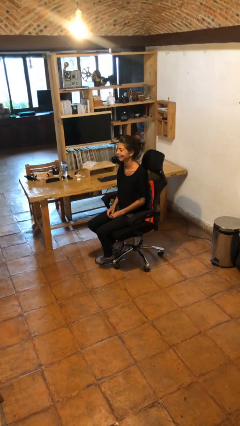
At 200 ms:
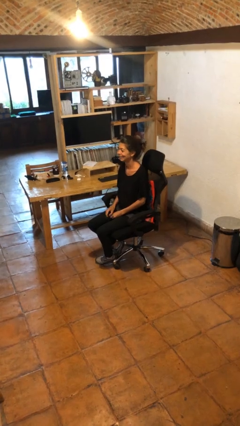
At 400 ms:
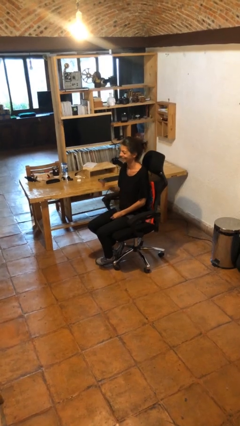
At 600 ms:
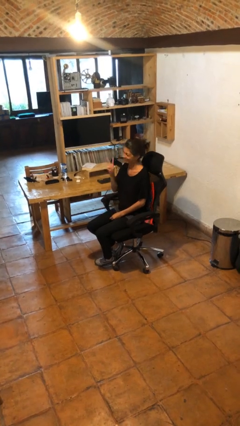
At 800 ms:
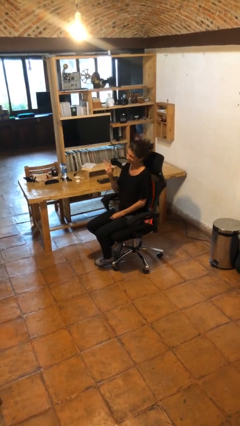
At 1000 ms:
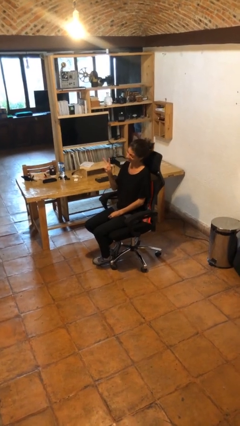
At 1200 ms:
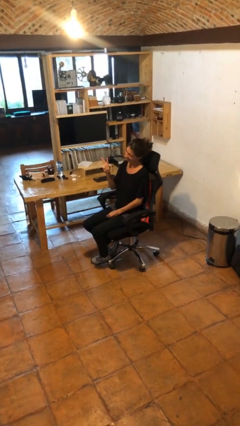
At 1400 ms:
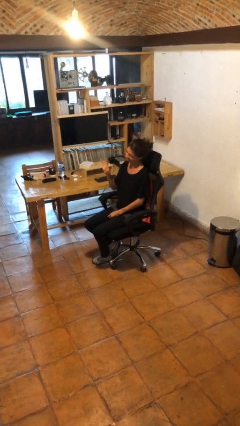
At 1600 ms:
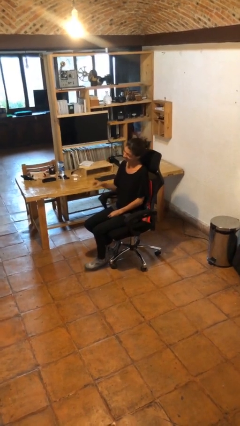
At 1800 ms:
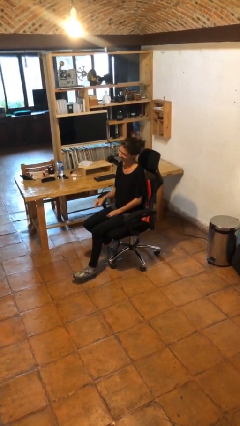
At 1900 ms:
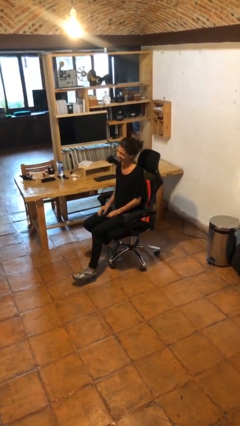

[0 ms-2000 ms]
person gestures peace

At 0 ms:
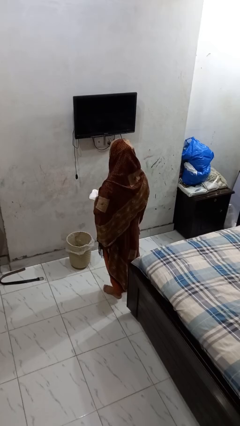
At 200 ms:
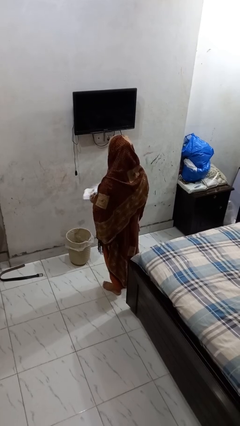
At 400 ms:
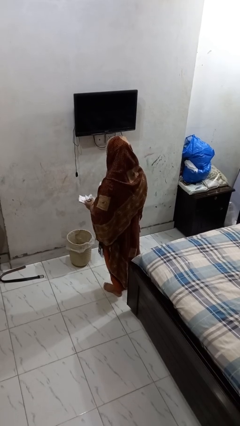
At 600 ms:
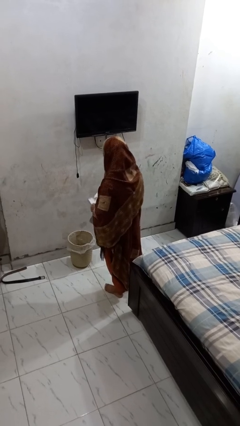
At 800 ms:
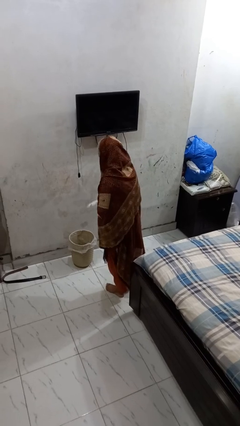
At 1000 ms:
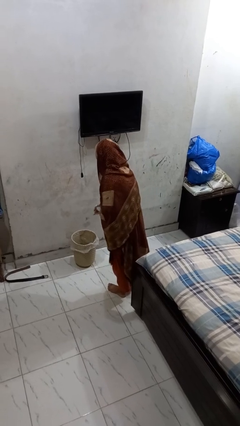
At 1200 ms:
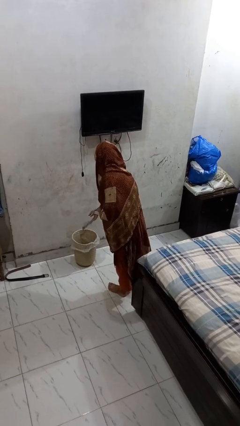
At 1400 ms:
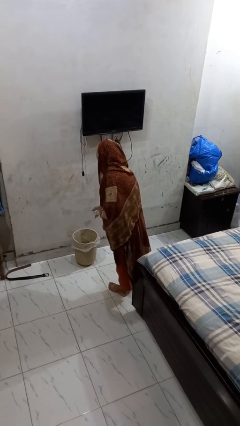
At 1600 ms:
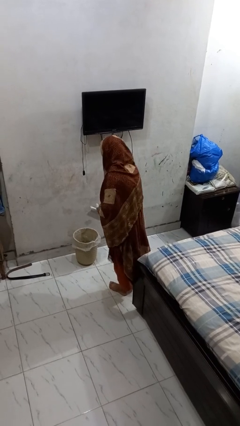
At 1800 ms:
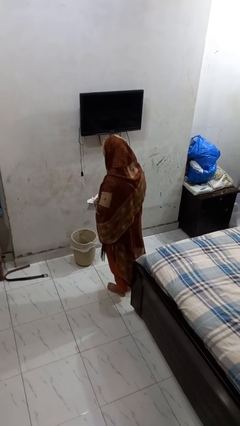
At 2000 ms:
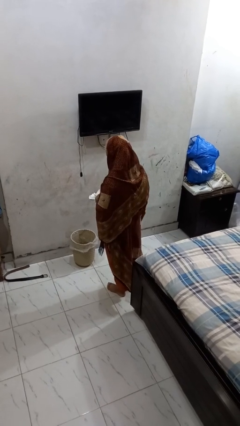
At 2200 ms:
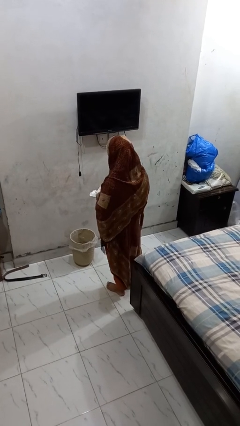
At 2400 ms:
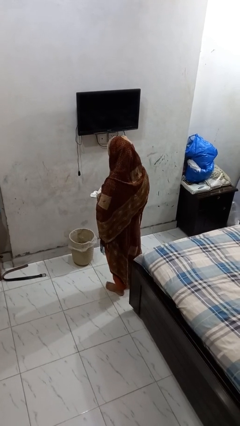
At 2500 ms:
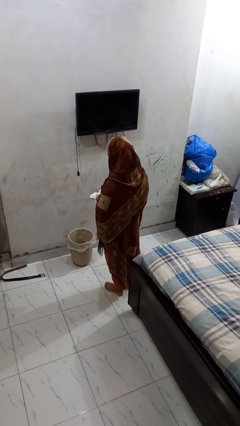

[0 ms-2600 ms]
person discards trash

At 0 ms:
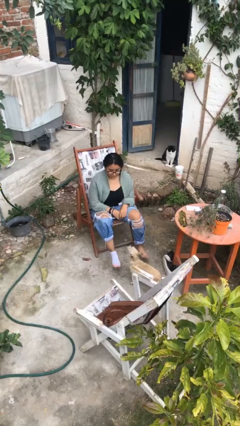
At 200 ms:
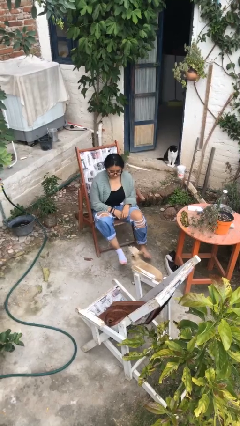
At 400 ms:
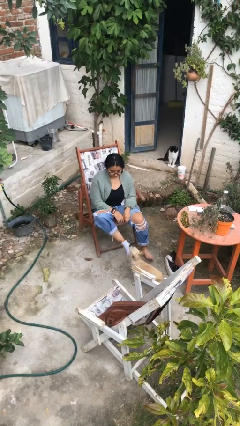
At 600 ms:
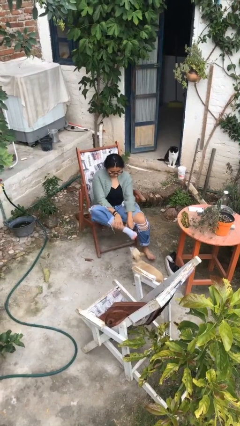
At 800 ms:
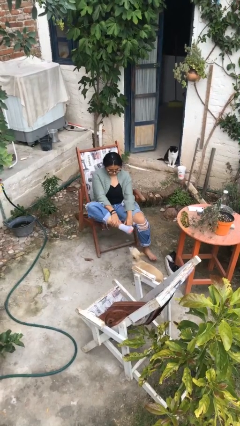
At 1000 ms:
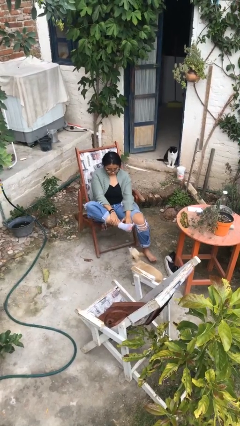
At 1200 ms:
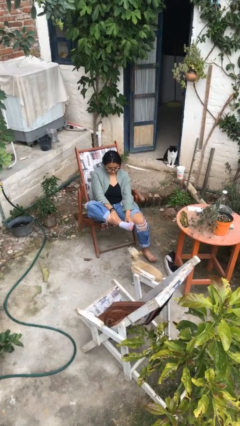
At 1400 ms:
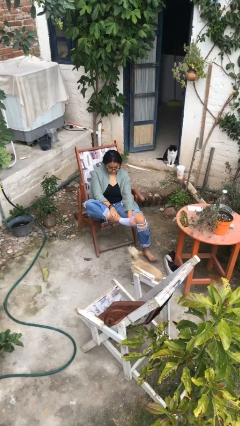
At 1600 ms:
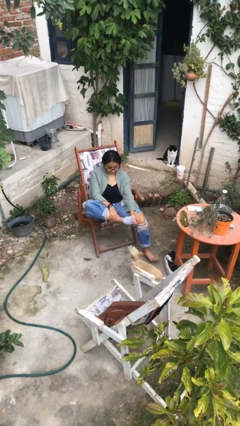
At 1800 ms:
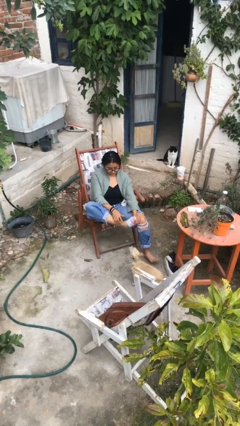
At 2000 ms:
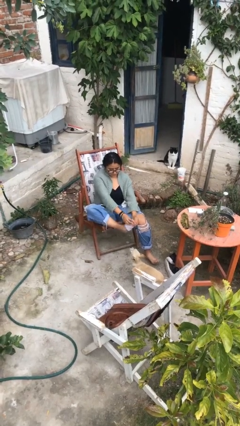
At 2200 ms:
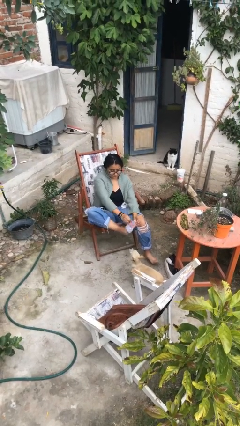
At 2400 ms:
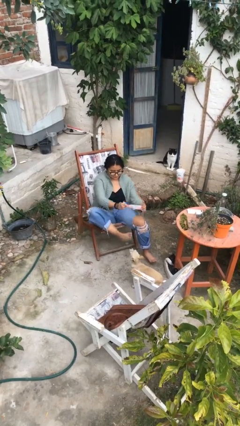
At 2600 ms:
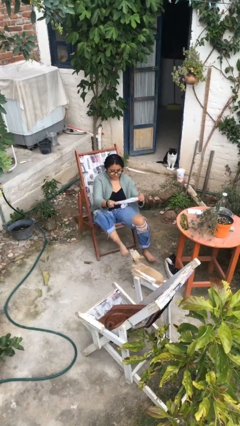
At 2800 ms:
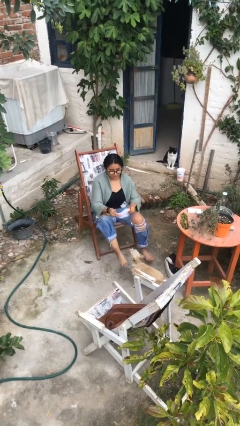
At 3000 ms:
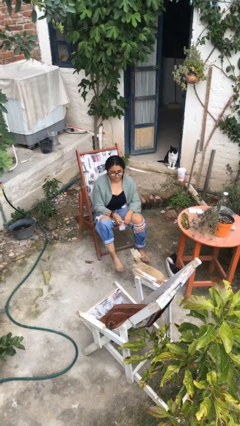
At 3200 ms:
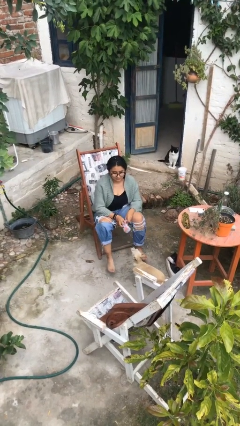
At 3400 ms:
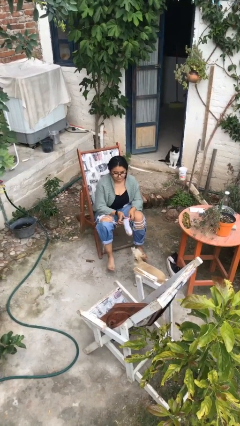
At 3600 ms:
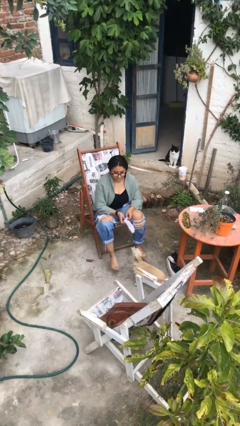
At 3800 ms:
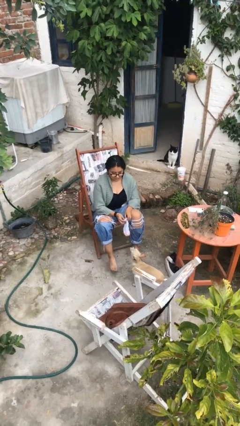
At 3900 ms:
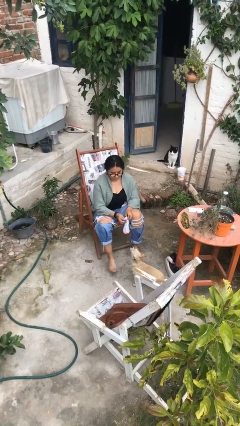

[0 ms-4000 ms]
person takes off socks

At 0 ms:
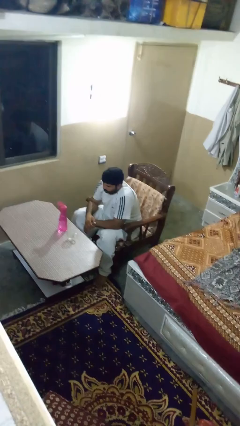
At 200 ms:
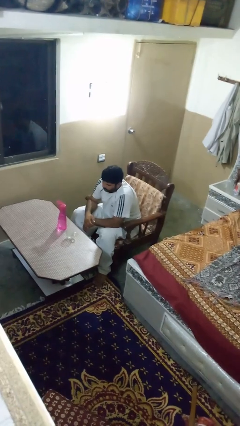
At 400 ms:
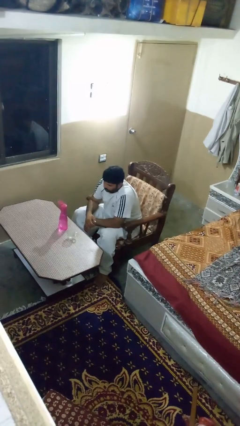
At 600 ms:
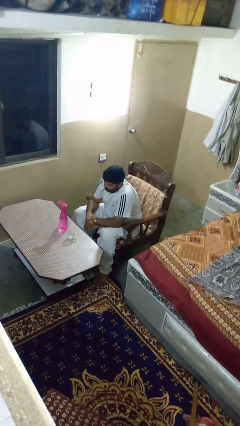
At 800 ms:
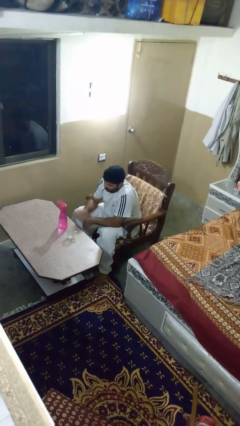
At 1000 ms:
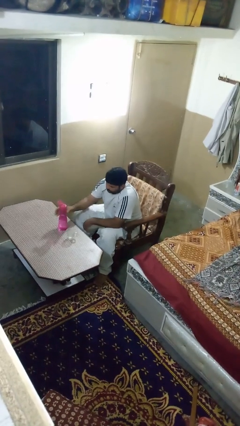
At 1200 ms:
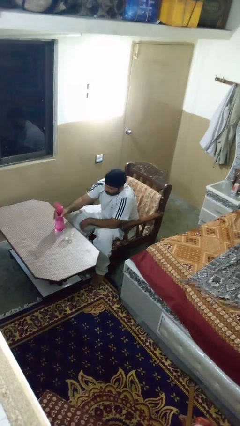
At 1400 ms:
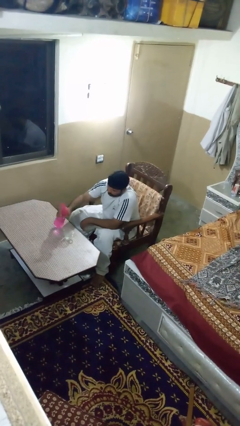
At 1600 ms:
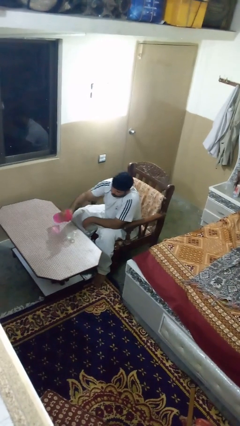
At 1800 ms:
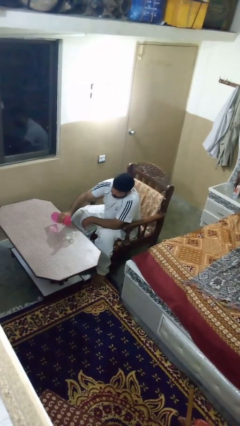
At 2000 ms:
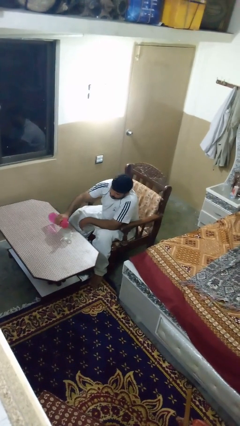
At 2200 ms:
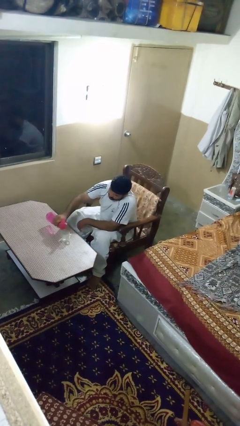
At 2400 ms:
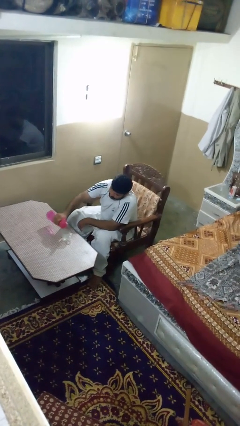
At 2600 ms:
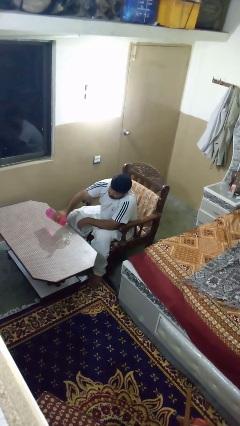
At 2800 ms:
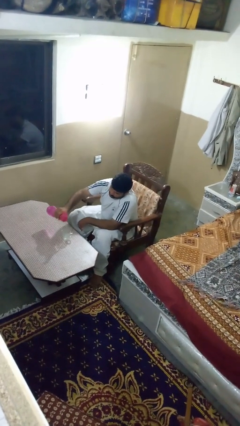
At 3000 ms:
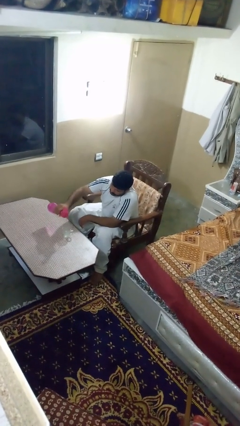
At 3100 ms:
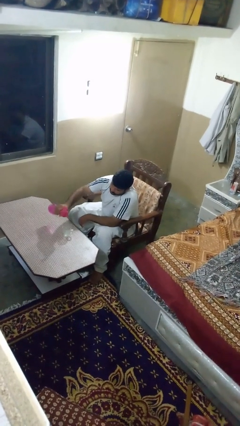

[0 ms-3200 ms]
person pours liquid into cup

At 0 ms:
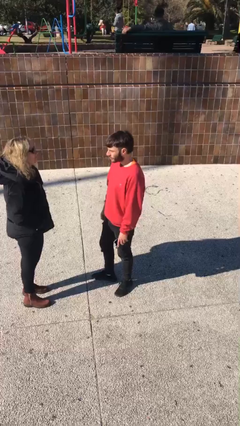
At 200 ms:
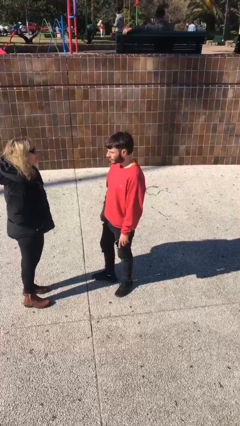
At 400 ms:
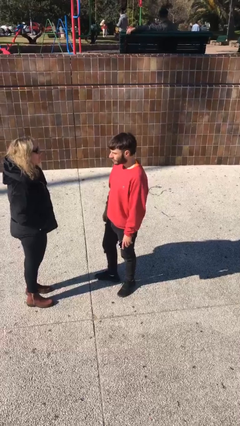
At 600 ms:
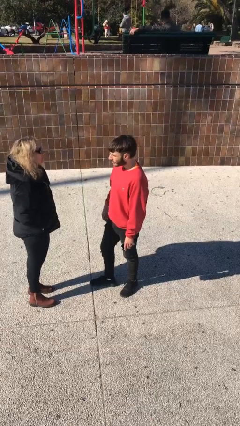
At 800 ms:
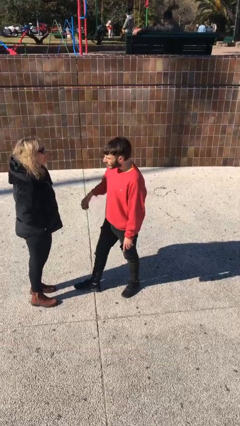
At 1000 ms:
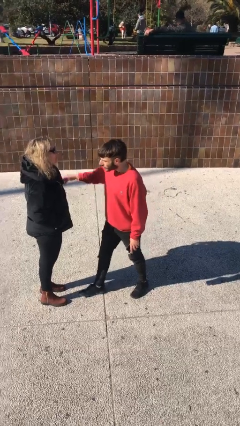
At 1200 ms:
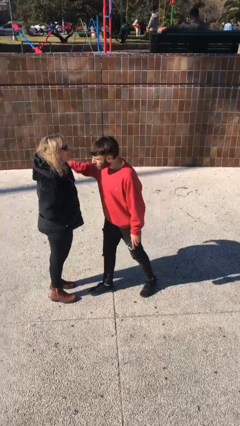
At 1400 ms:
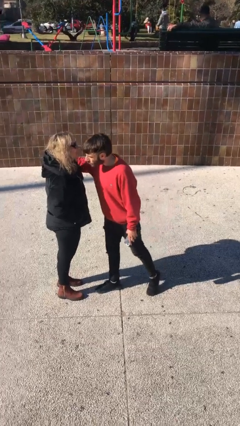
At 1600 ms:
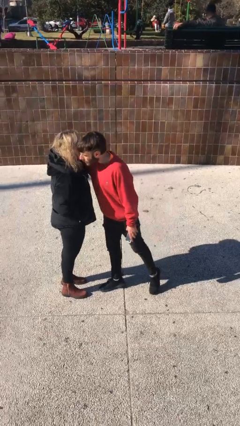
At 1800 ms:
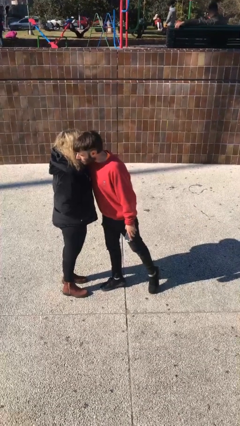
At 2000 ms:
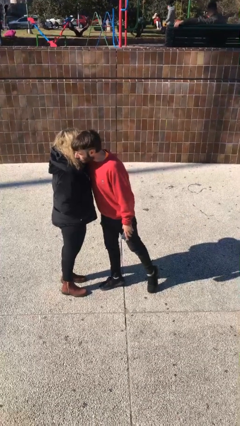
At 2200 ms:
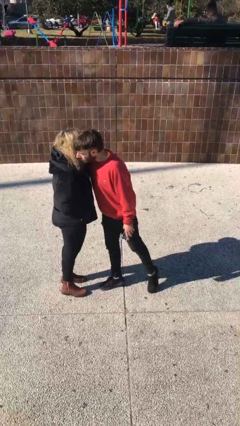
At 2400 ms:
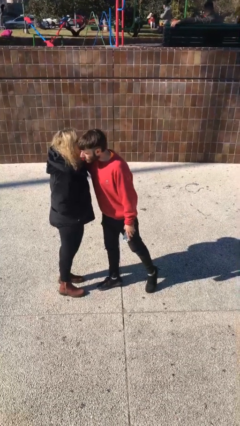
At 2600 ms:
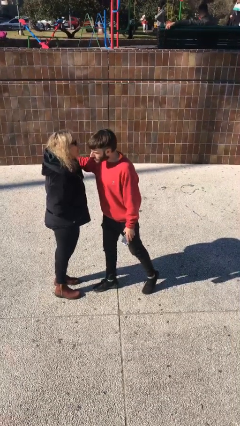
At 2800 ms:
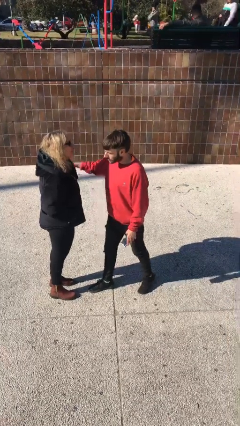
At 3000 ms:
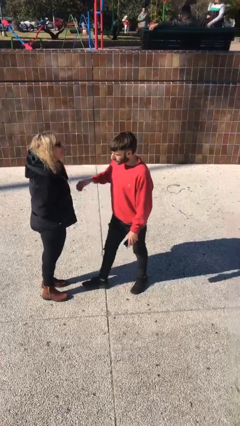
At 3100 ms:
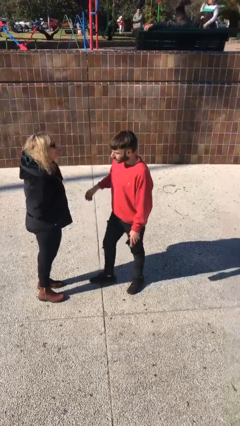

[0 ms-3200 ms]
person kisses cheek of person

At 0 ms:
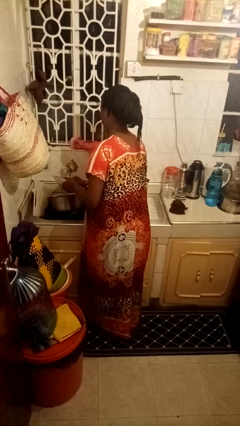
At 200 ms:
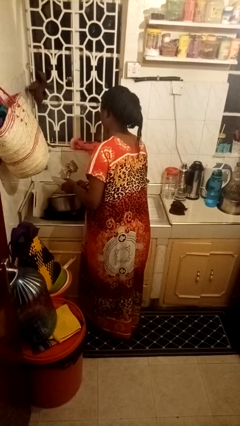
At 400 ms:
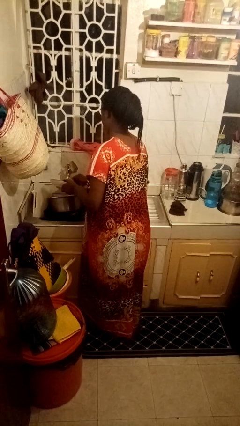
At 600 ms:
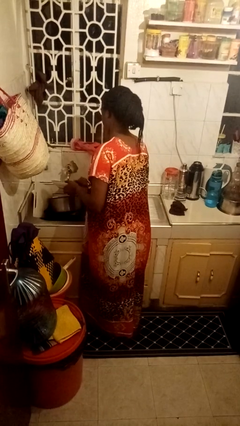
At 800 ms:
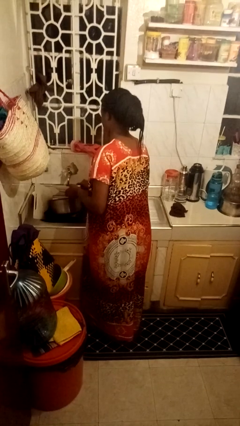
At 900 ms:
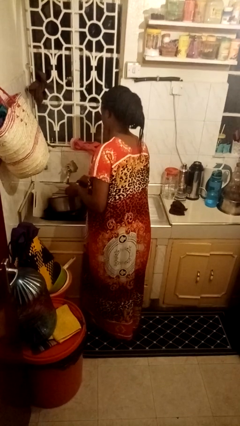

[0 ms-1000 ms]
person washes dish

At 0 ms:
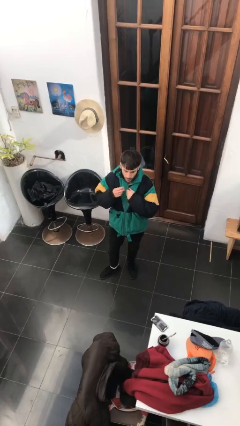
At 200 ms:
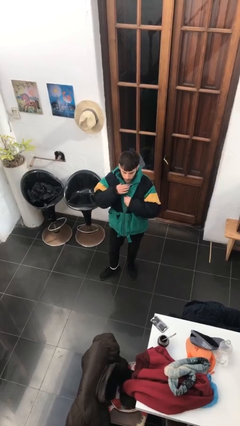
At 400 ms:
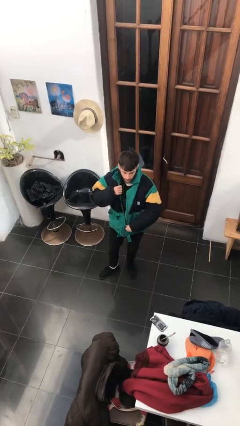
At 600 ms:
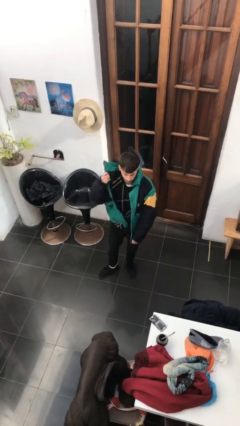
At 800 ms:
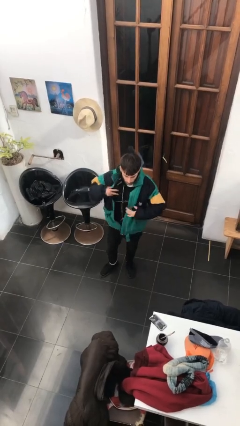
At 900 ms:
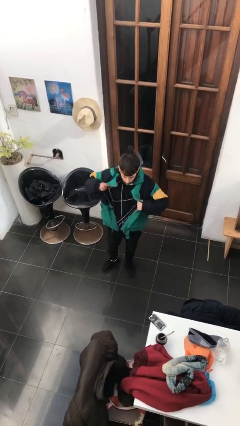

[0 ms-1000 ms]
person unzips jacket

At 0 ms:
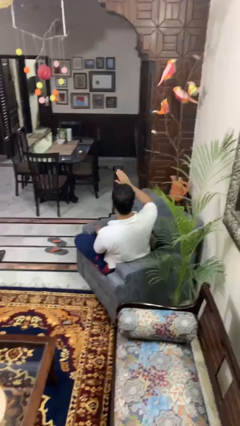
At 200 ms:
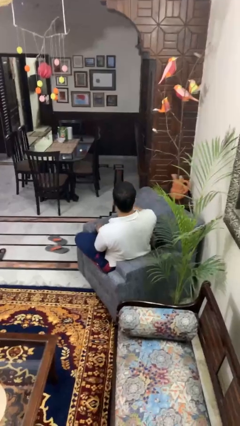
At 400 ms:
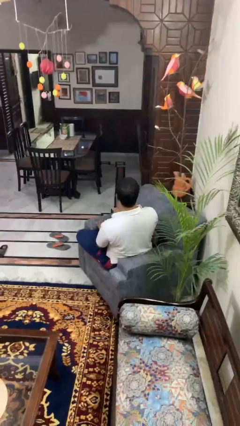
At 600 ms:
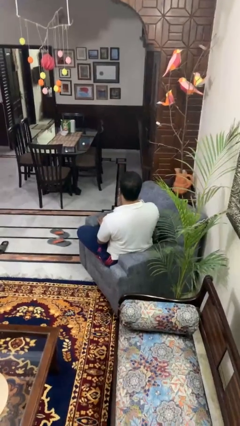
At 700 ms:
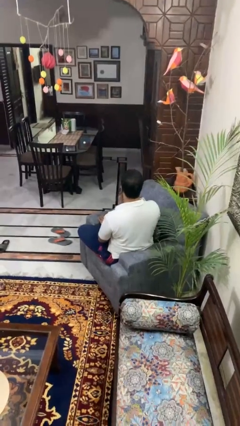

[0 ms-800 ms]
person gestures lower hand
